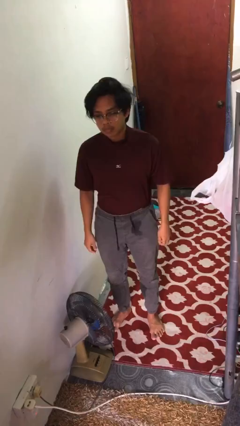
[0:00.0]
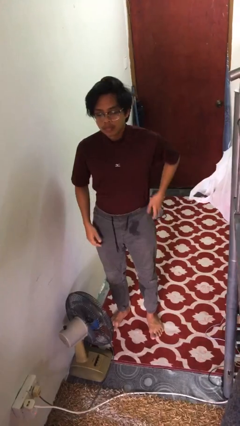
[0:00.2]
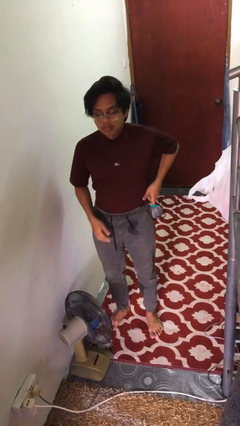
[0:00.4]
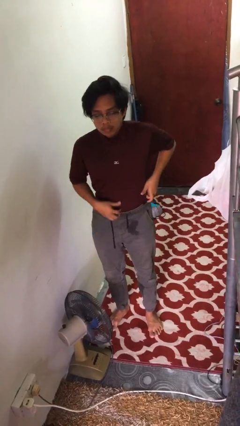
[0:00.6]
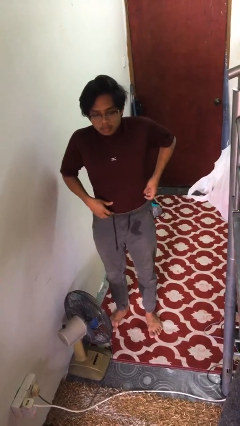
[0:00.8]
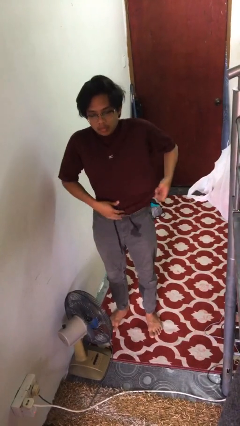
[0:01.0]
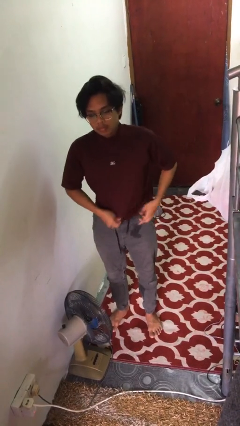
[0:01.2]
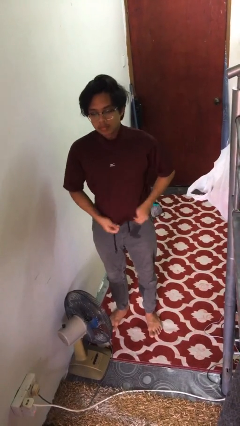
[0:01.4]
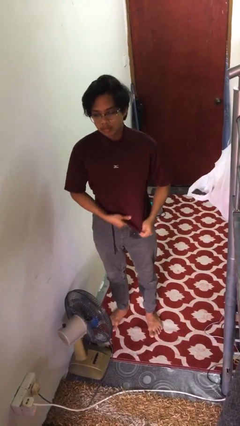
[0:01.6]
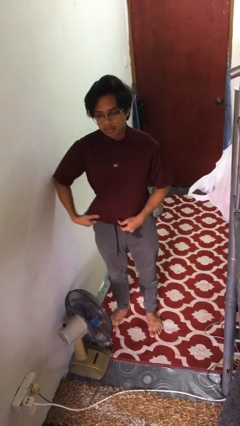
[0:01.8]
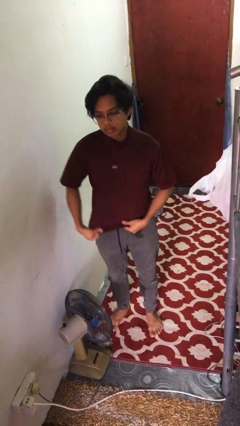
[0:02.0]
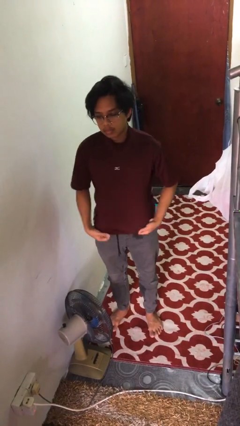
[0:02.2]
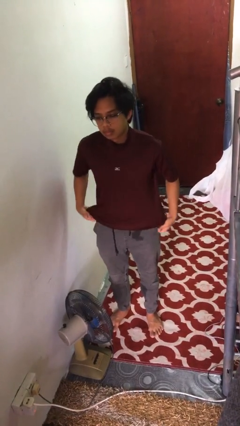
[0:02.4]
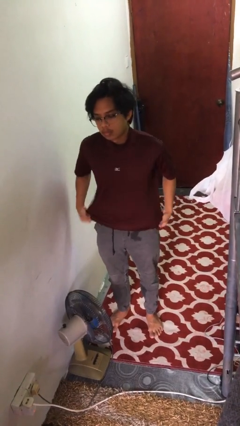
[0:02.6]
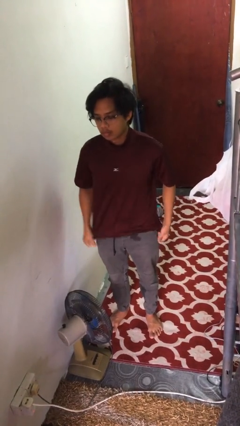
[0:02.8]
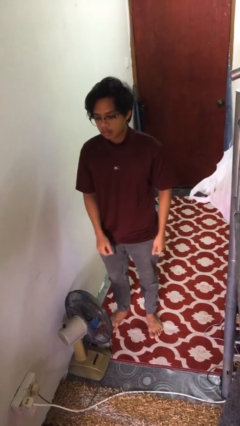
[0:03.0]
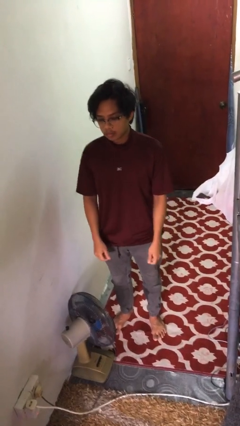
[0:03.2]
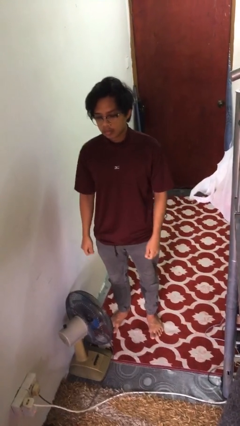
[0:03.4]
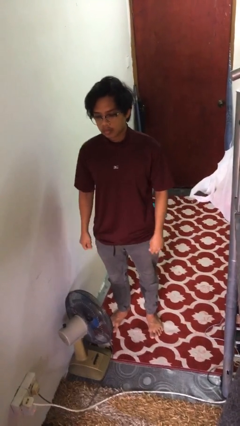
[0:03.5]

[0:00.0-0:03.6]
person untucks shirt

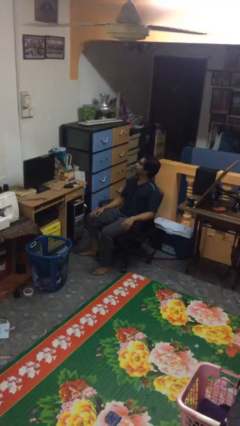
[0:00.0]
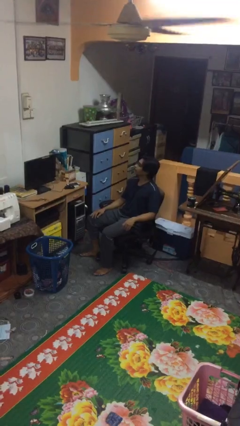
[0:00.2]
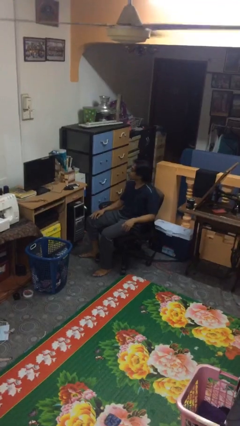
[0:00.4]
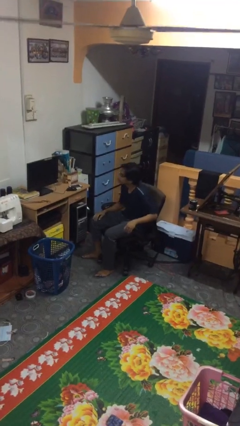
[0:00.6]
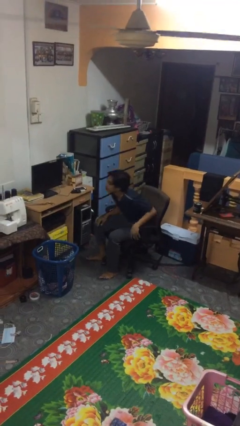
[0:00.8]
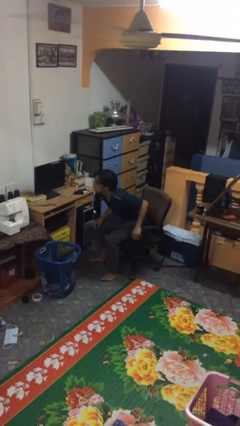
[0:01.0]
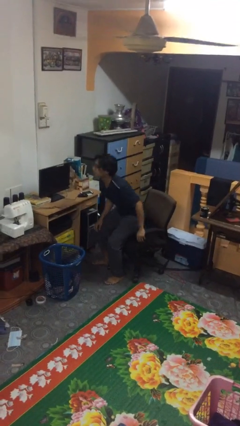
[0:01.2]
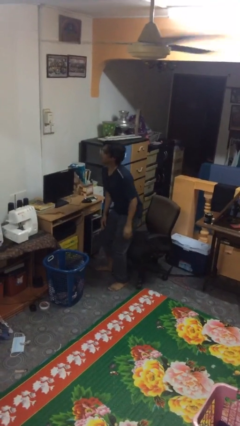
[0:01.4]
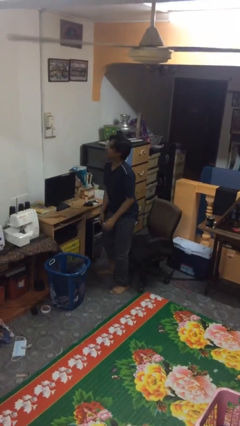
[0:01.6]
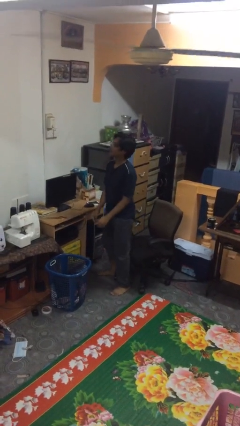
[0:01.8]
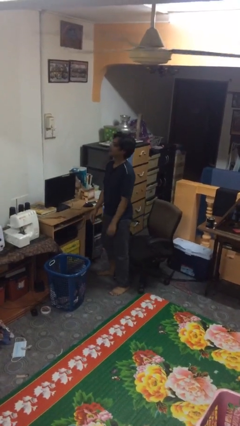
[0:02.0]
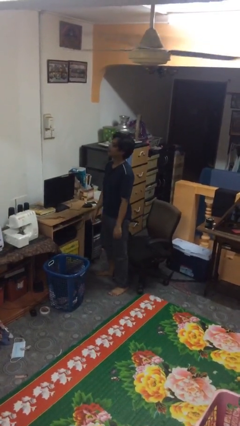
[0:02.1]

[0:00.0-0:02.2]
person stands up

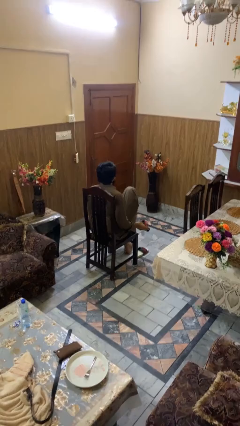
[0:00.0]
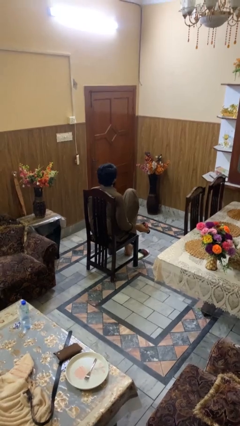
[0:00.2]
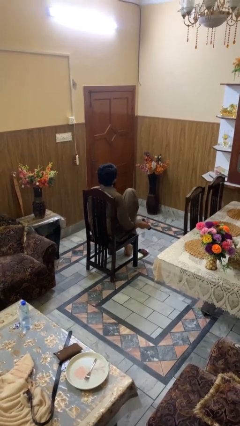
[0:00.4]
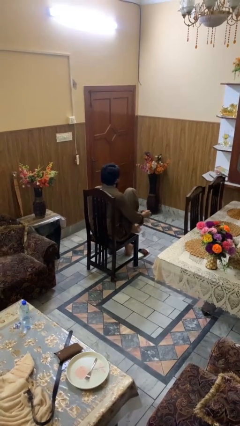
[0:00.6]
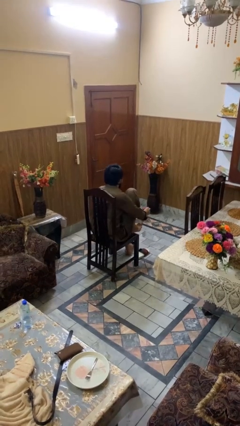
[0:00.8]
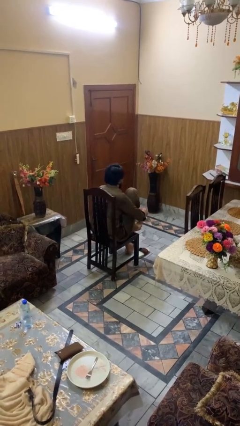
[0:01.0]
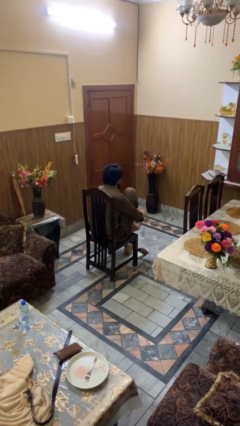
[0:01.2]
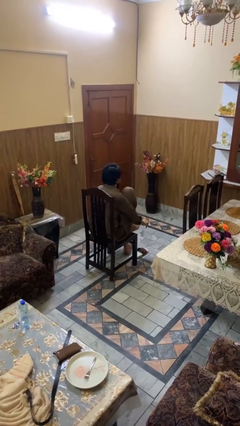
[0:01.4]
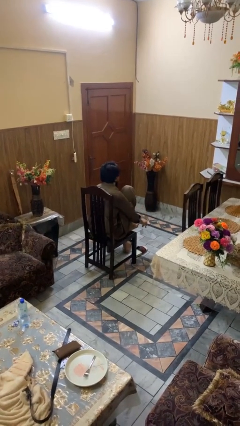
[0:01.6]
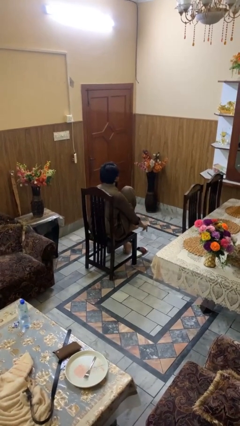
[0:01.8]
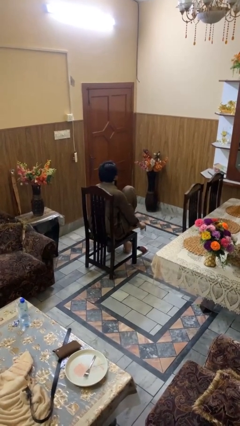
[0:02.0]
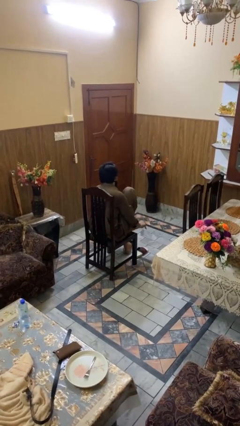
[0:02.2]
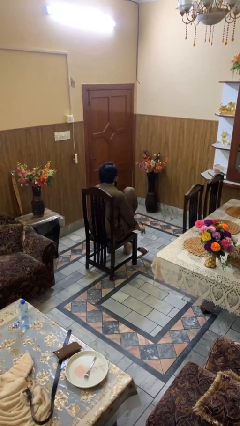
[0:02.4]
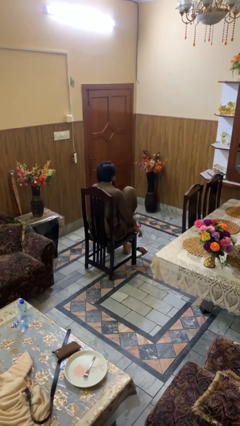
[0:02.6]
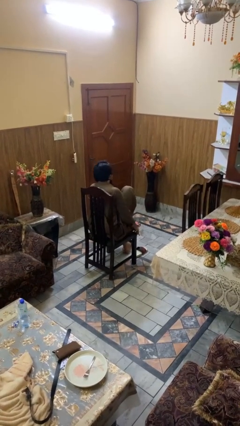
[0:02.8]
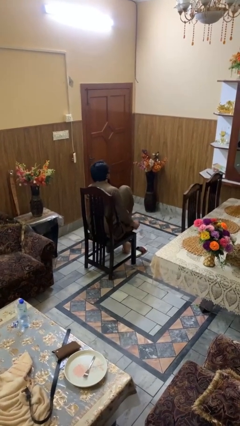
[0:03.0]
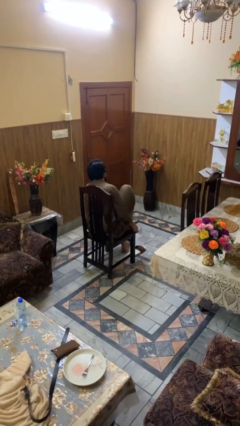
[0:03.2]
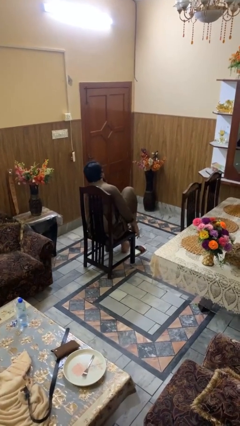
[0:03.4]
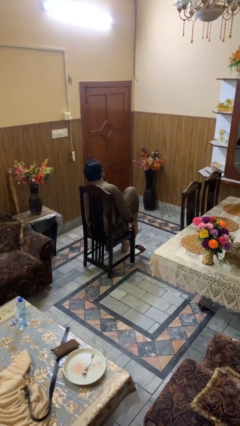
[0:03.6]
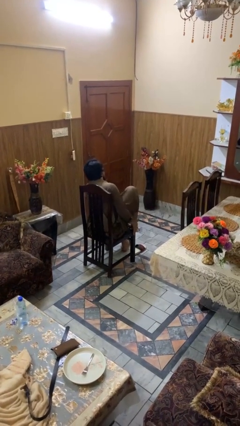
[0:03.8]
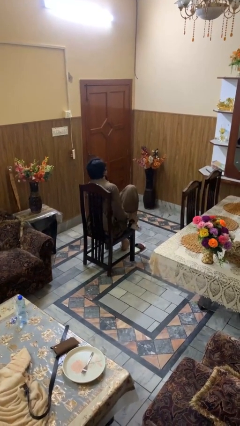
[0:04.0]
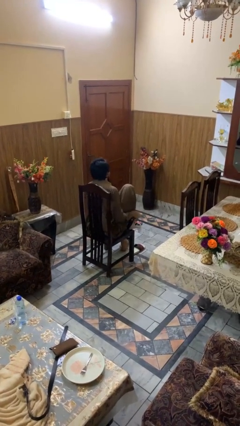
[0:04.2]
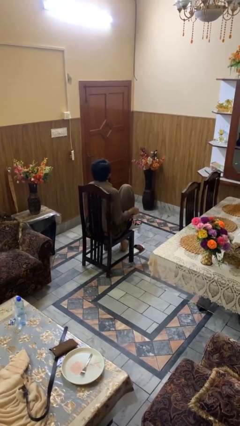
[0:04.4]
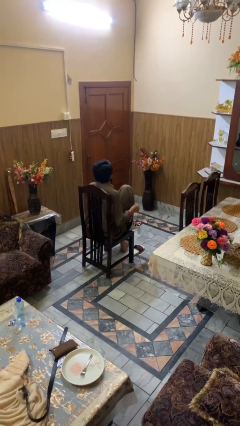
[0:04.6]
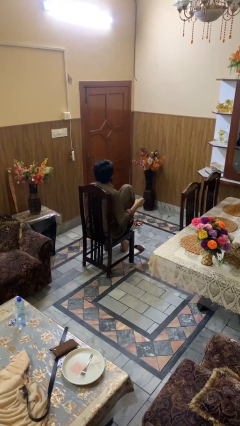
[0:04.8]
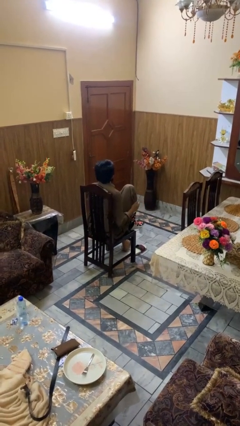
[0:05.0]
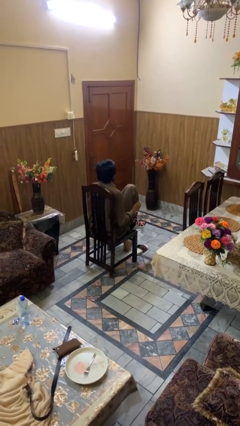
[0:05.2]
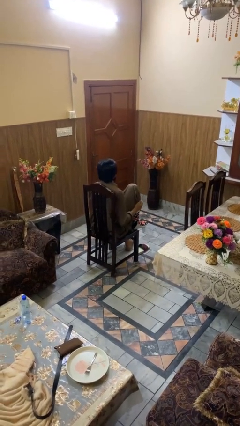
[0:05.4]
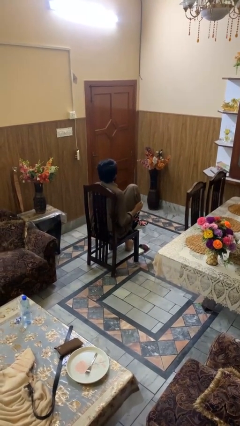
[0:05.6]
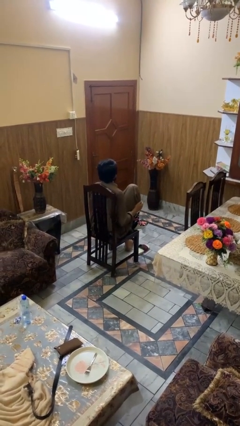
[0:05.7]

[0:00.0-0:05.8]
person puts on socks

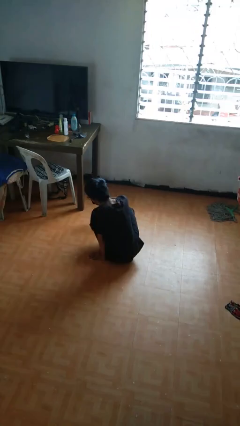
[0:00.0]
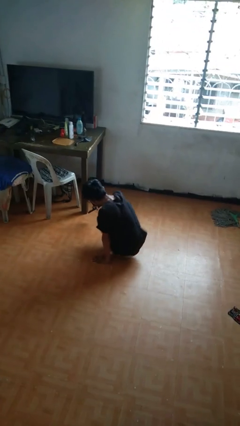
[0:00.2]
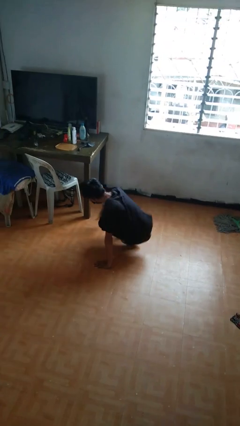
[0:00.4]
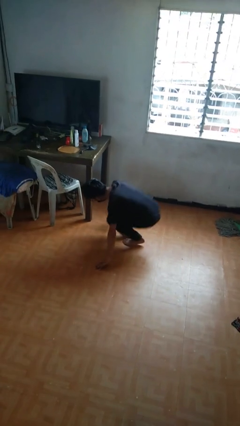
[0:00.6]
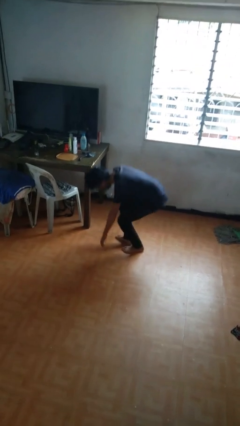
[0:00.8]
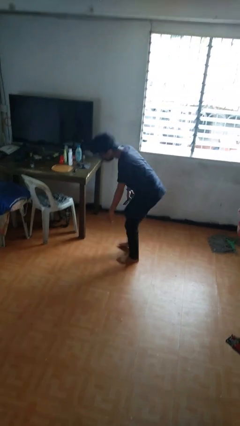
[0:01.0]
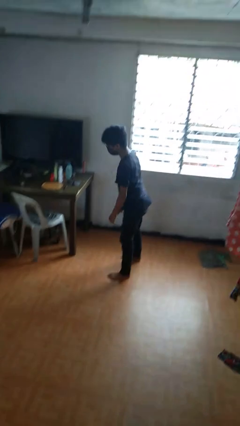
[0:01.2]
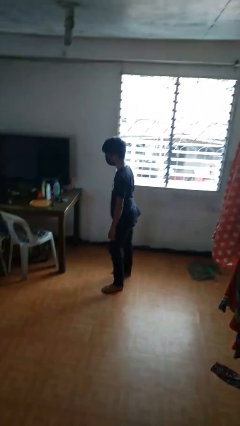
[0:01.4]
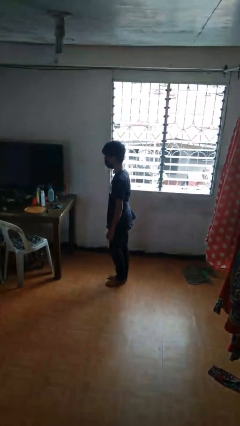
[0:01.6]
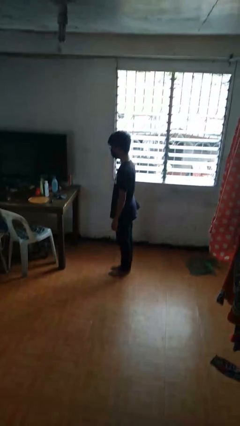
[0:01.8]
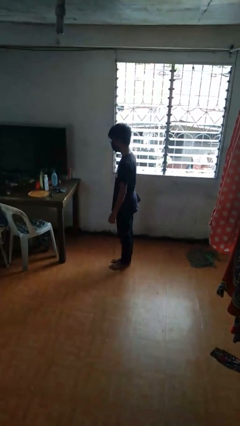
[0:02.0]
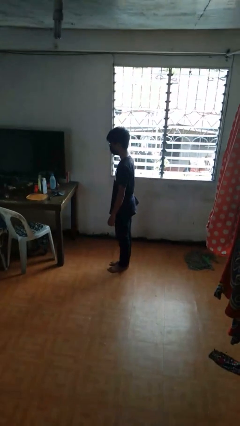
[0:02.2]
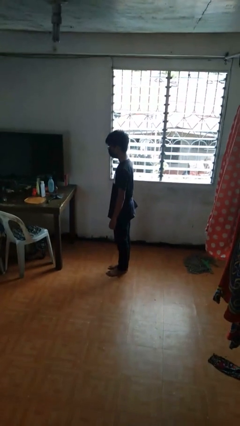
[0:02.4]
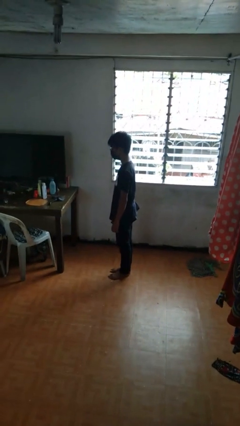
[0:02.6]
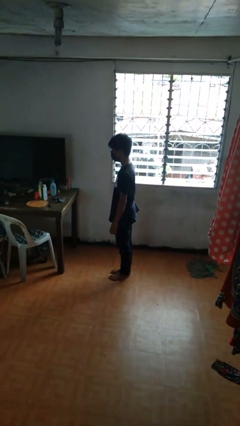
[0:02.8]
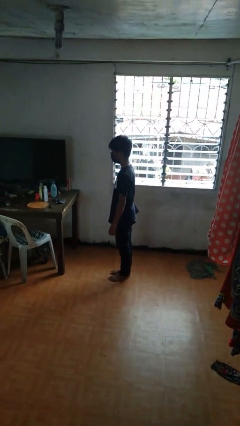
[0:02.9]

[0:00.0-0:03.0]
person stands up from floor

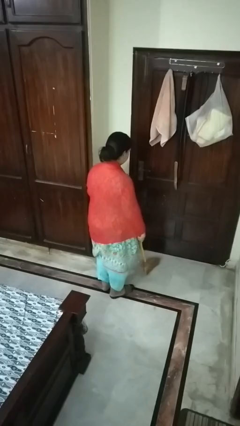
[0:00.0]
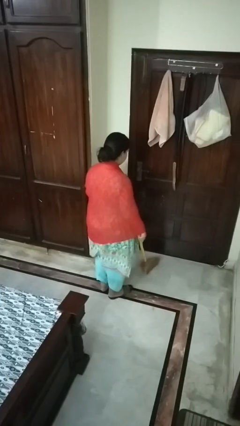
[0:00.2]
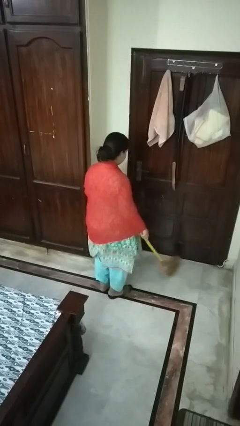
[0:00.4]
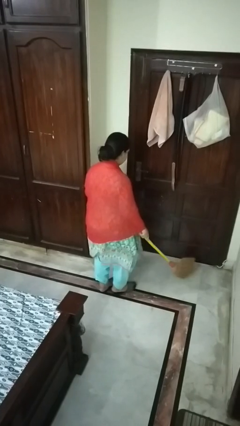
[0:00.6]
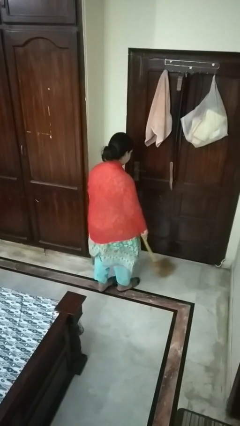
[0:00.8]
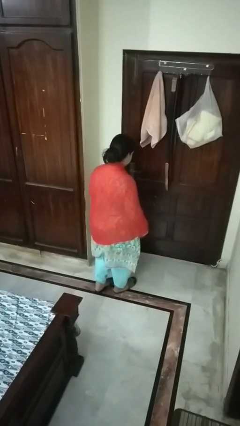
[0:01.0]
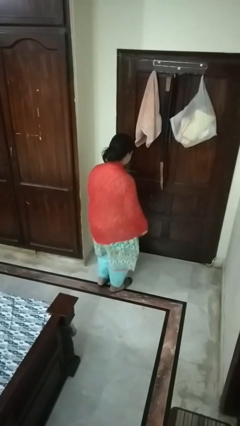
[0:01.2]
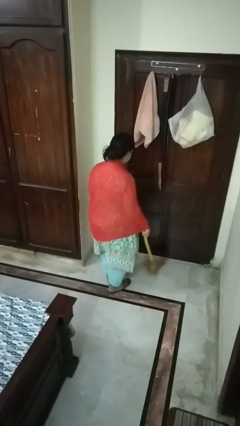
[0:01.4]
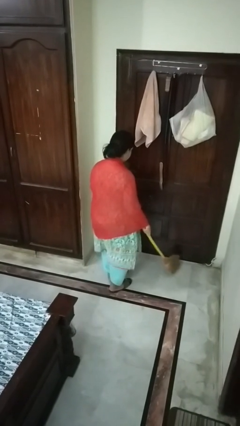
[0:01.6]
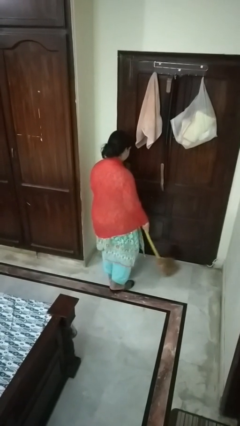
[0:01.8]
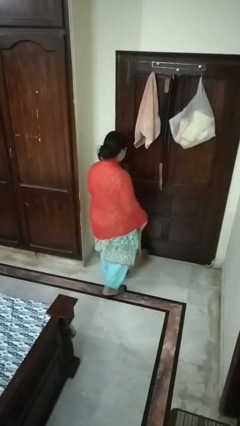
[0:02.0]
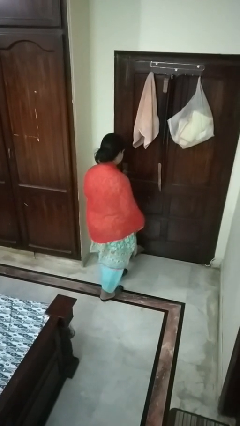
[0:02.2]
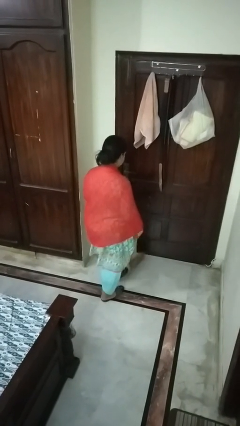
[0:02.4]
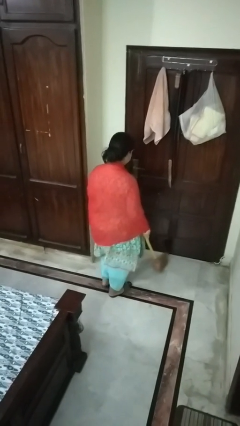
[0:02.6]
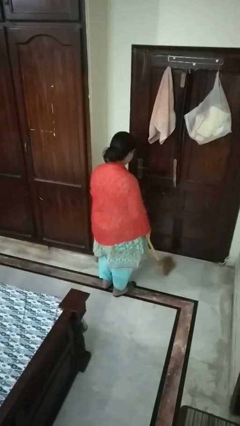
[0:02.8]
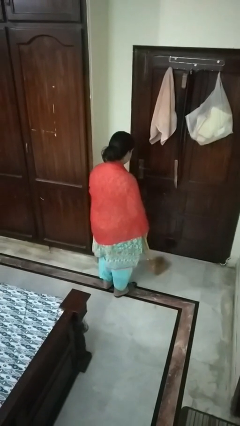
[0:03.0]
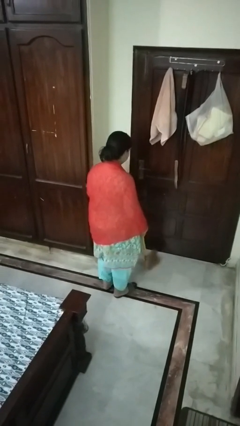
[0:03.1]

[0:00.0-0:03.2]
person sweeps floor

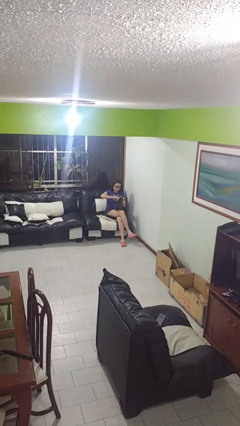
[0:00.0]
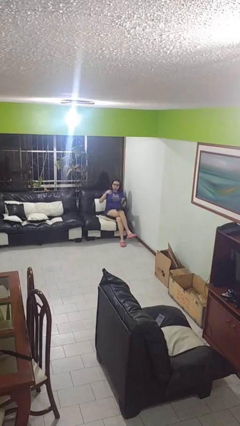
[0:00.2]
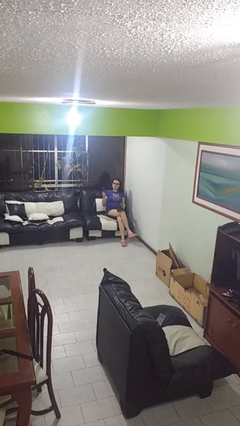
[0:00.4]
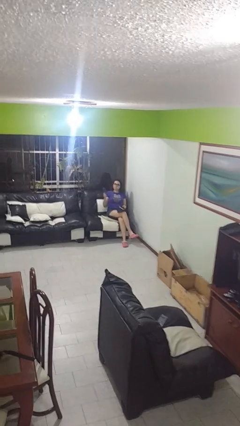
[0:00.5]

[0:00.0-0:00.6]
person takes object from purse
